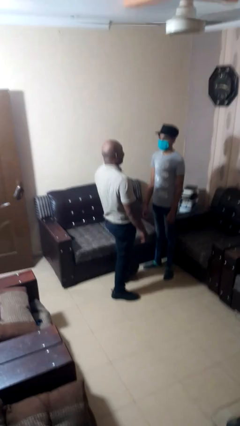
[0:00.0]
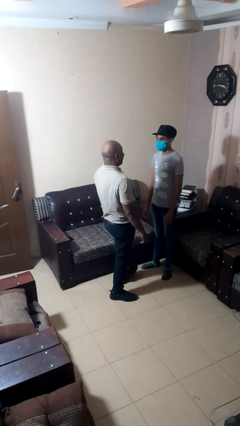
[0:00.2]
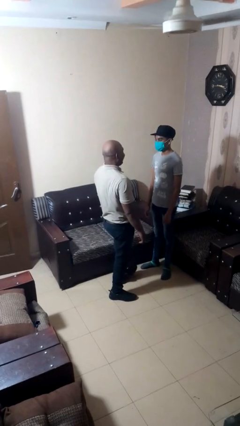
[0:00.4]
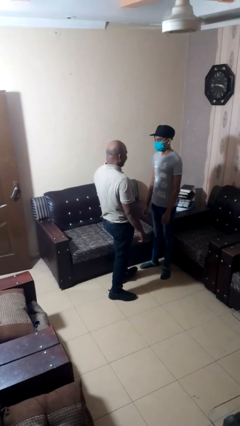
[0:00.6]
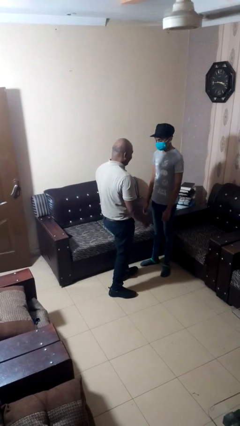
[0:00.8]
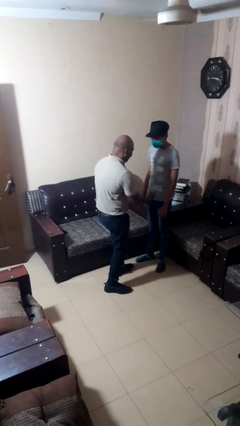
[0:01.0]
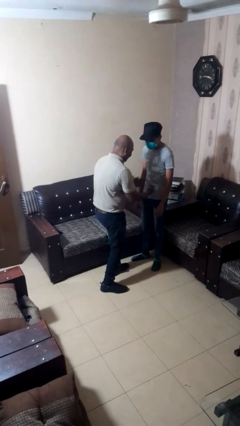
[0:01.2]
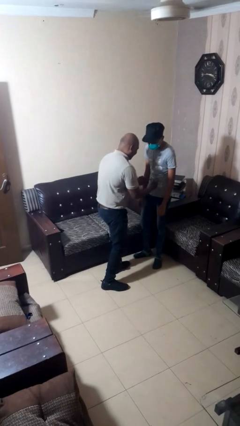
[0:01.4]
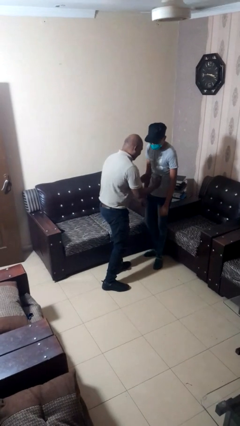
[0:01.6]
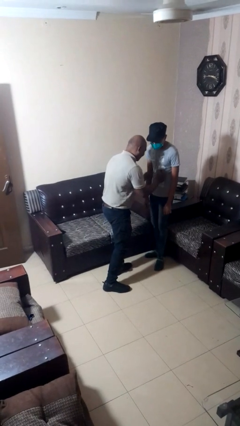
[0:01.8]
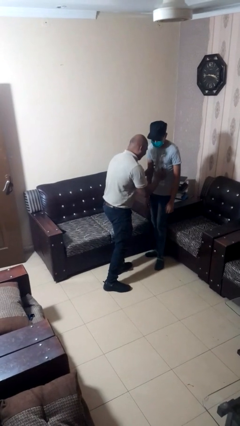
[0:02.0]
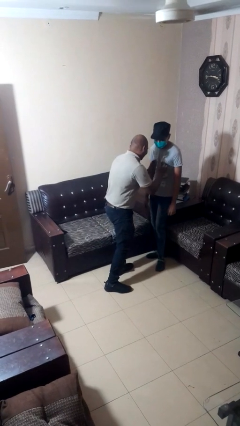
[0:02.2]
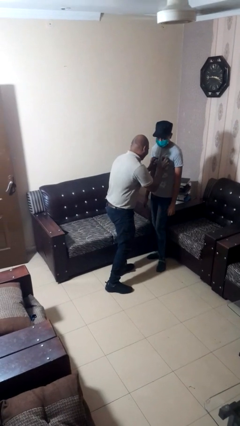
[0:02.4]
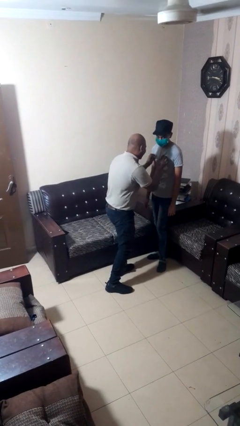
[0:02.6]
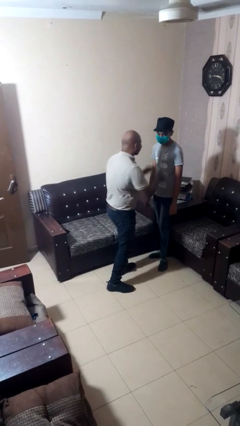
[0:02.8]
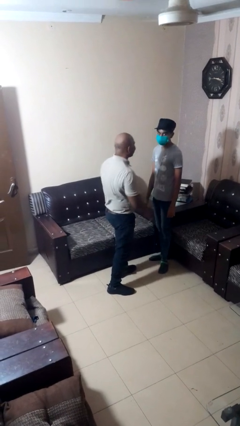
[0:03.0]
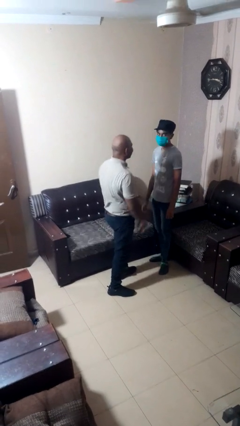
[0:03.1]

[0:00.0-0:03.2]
person tickles person

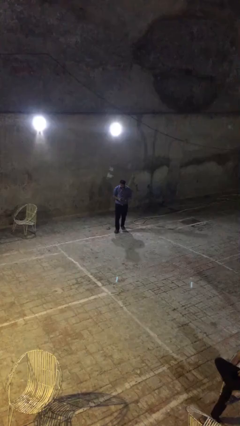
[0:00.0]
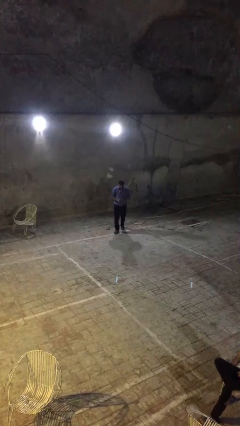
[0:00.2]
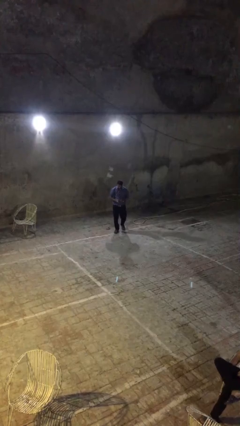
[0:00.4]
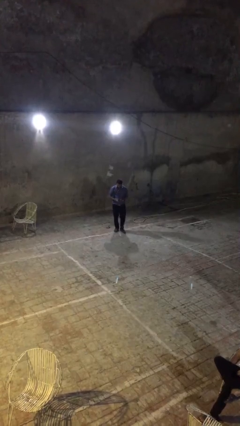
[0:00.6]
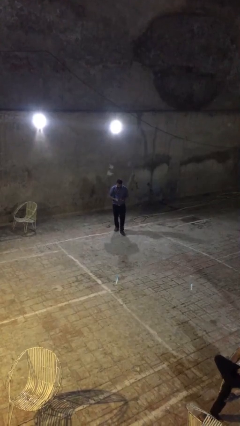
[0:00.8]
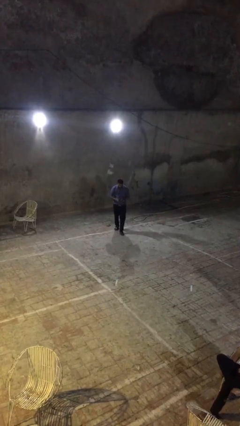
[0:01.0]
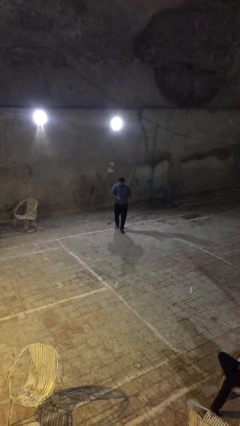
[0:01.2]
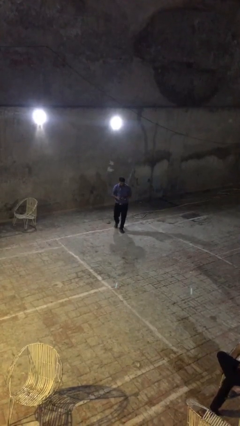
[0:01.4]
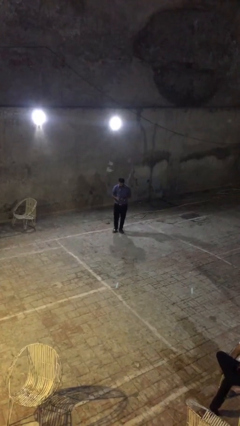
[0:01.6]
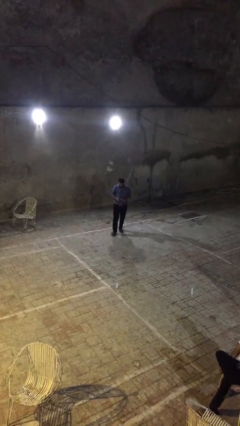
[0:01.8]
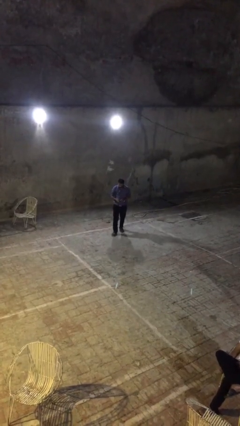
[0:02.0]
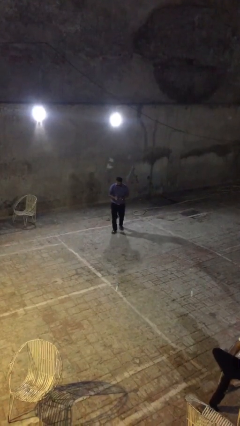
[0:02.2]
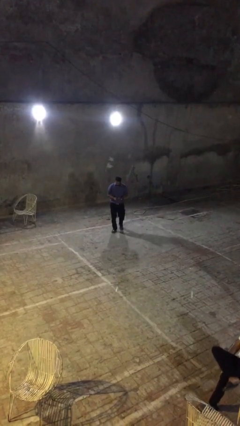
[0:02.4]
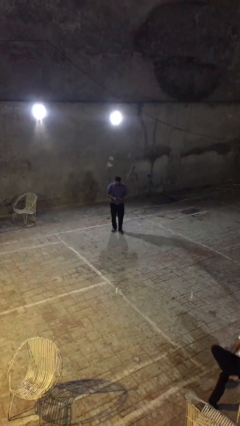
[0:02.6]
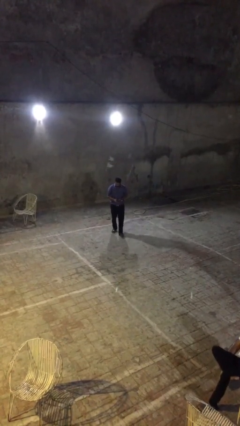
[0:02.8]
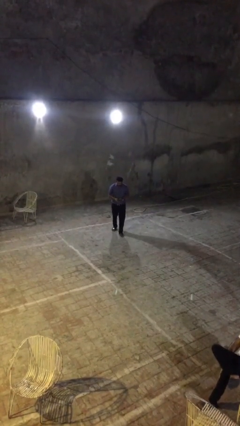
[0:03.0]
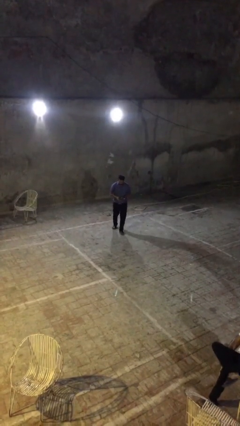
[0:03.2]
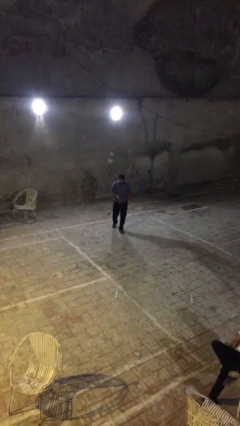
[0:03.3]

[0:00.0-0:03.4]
person texts on phone

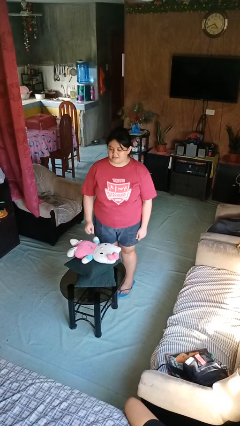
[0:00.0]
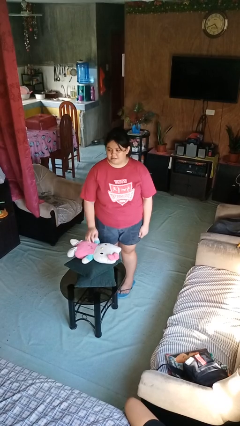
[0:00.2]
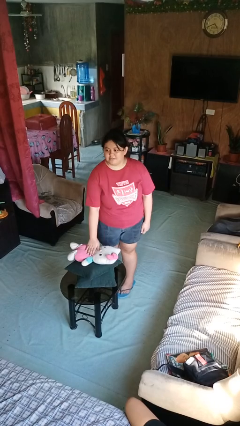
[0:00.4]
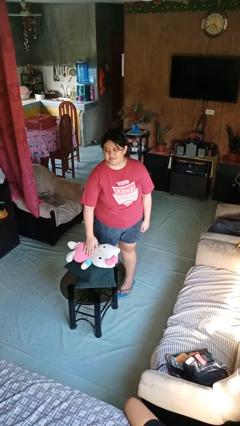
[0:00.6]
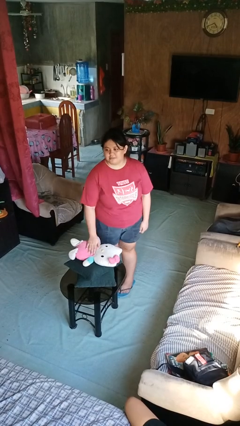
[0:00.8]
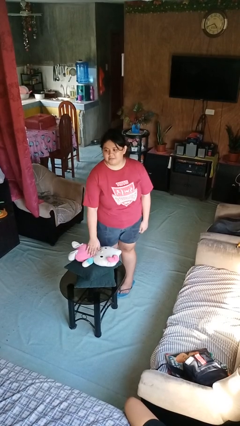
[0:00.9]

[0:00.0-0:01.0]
person taps object with finger

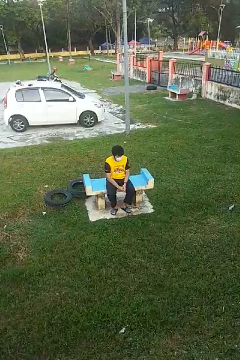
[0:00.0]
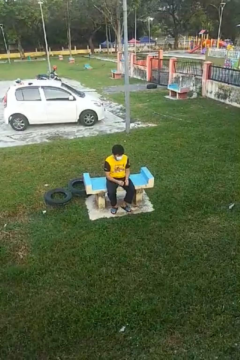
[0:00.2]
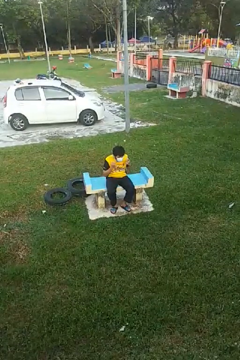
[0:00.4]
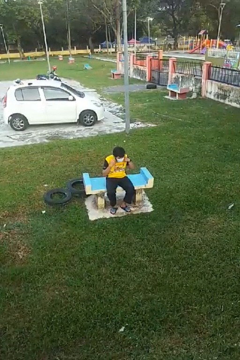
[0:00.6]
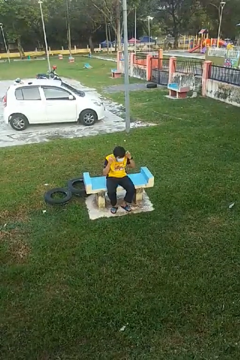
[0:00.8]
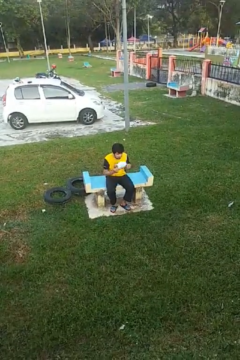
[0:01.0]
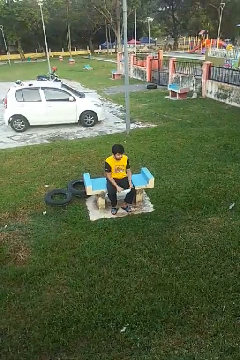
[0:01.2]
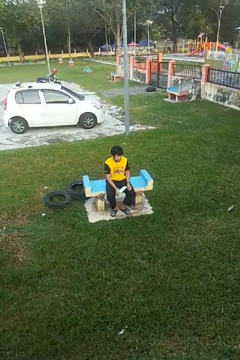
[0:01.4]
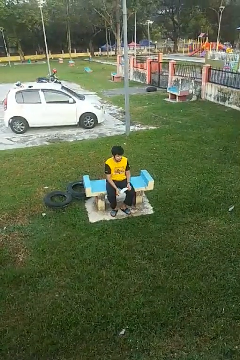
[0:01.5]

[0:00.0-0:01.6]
person takes off facemask

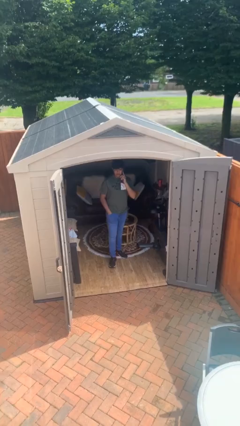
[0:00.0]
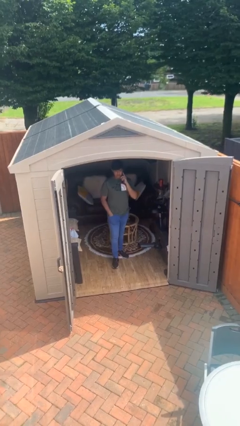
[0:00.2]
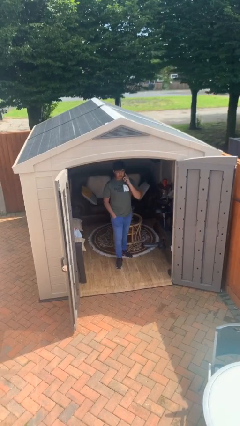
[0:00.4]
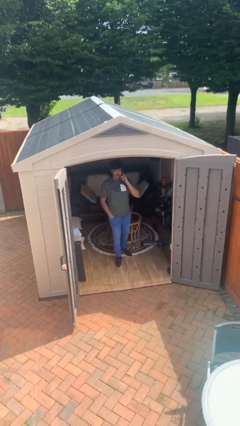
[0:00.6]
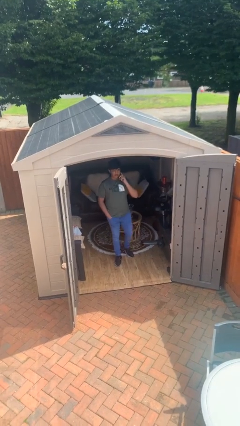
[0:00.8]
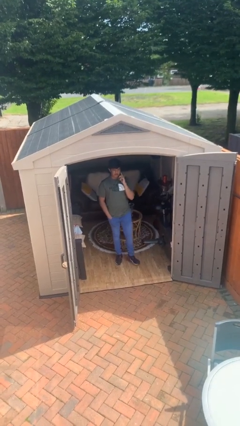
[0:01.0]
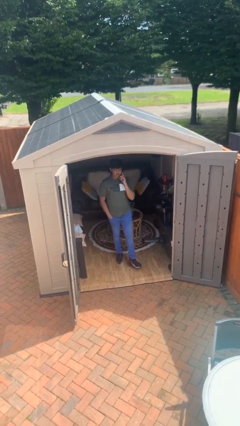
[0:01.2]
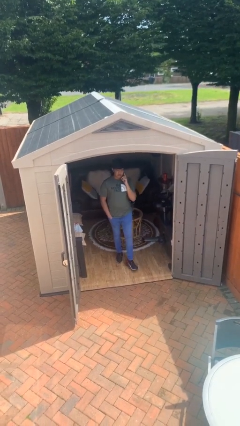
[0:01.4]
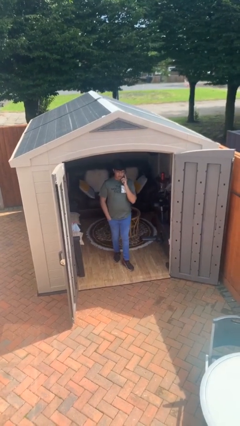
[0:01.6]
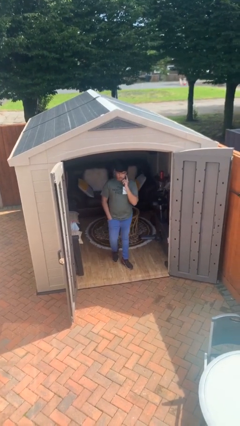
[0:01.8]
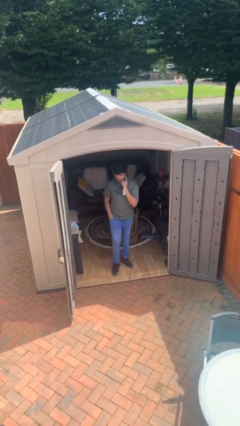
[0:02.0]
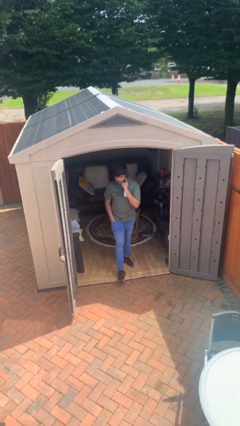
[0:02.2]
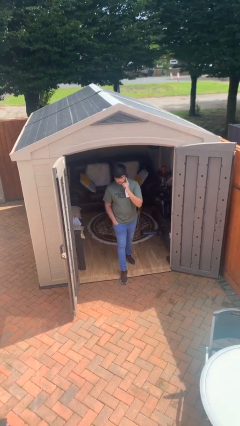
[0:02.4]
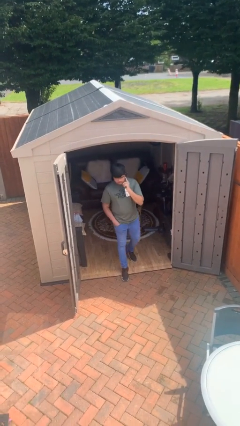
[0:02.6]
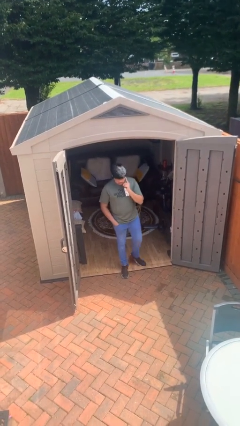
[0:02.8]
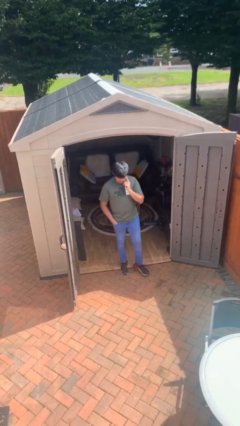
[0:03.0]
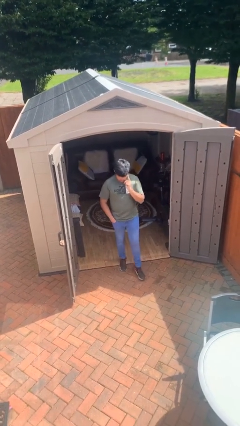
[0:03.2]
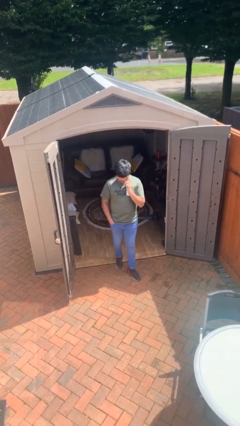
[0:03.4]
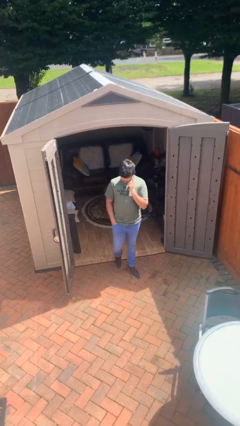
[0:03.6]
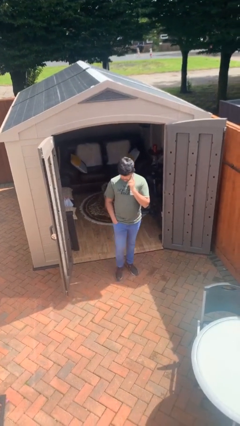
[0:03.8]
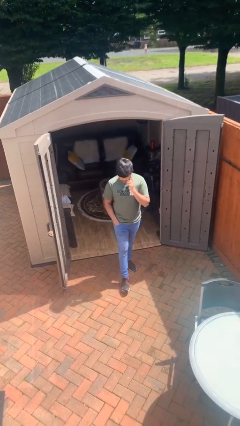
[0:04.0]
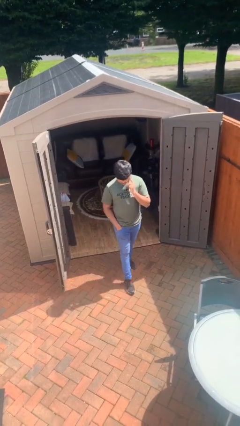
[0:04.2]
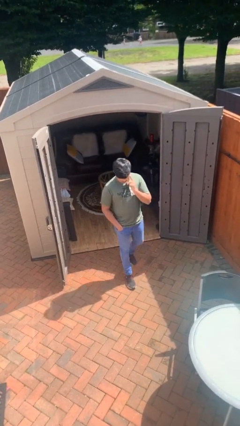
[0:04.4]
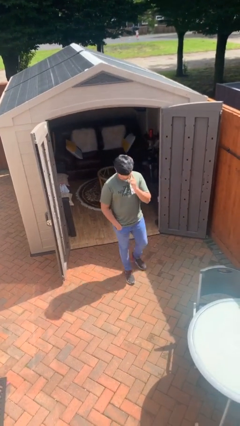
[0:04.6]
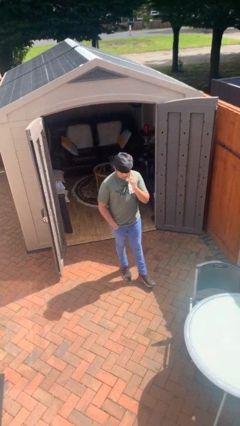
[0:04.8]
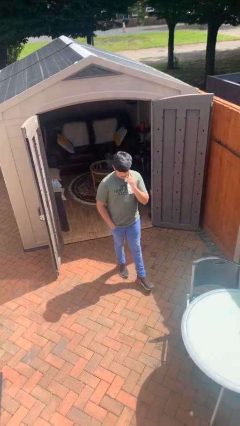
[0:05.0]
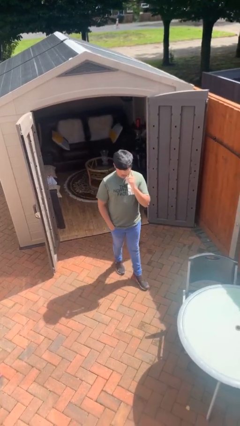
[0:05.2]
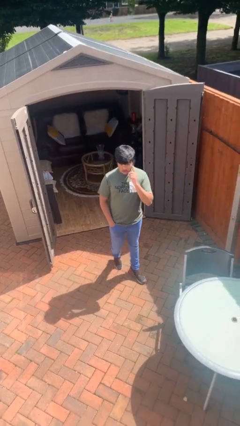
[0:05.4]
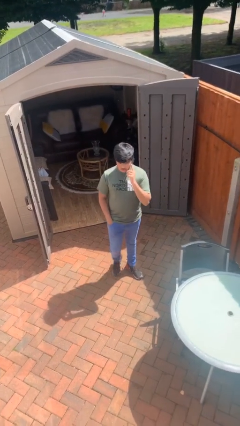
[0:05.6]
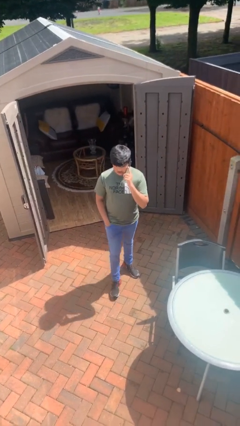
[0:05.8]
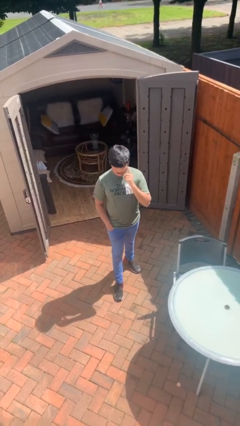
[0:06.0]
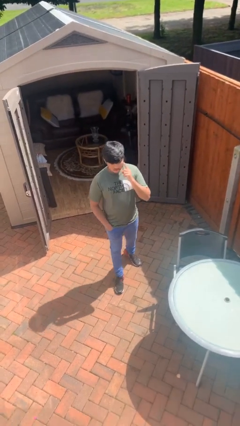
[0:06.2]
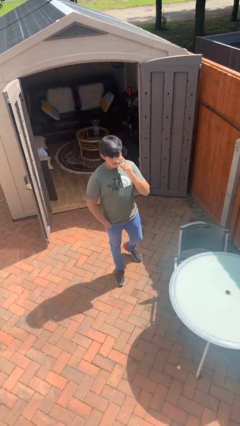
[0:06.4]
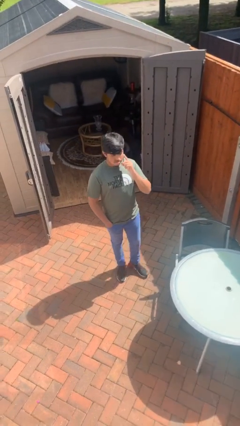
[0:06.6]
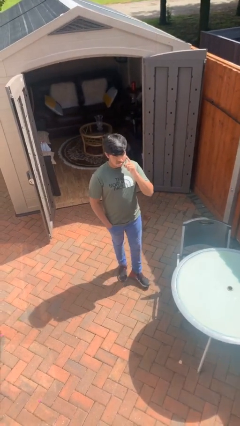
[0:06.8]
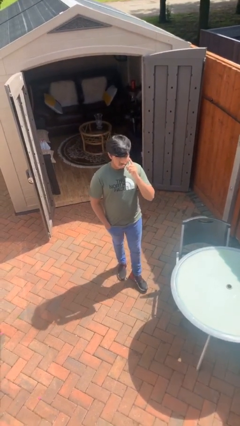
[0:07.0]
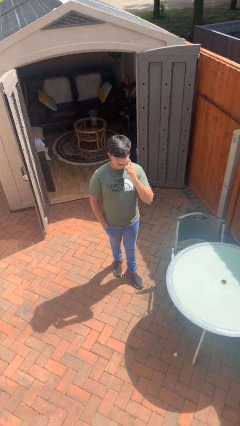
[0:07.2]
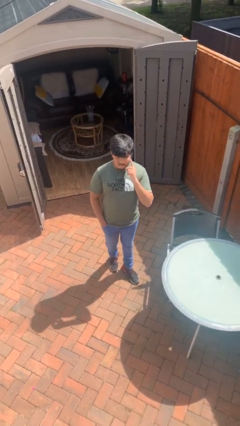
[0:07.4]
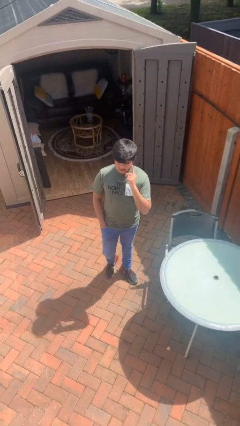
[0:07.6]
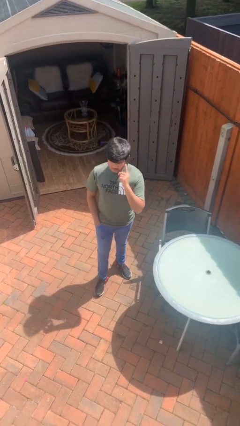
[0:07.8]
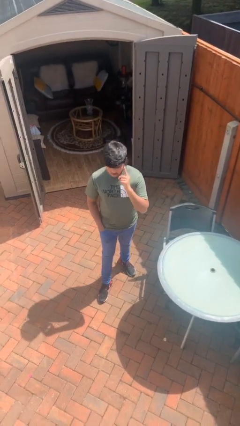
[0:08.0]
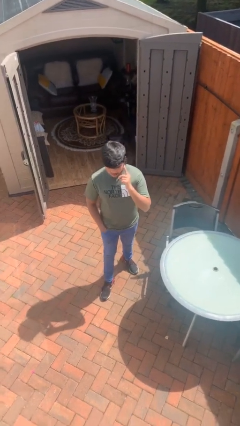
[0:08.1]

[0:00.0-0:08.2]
person enters scene through structure

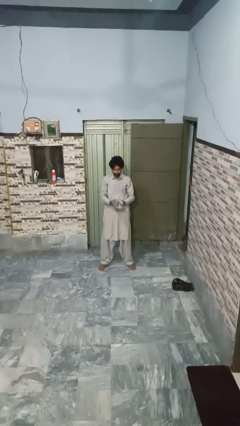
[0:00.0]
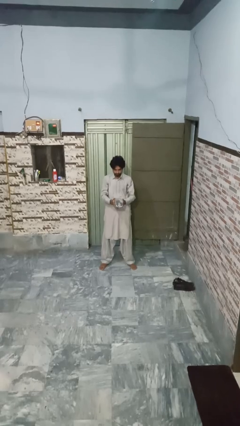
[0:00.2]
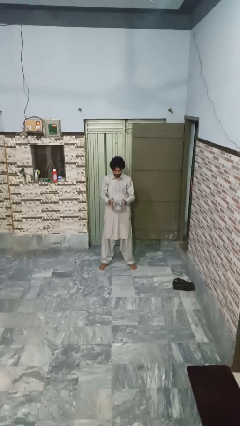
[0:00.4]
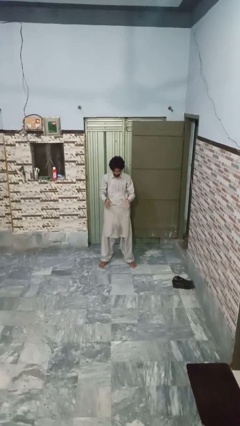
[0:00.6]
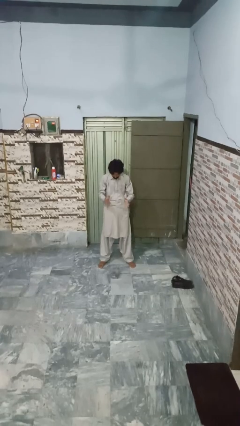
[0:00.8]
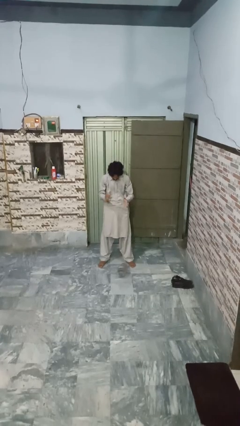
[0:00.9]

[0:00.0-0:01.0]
person drops object
